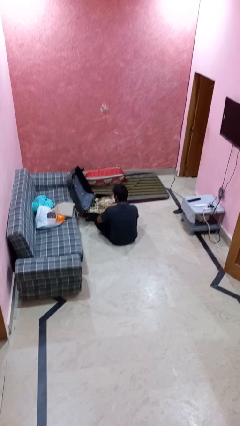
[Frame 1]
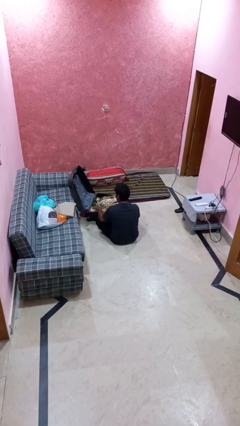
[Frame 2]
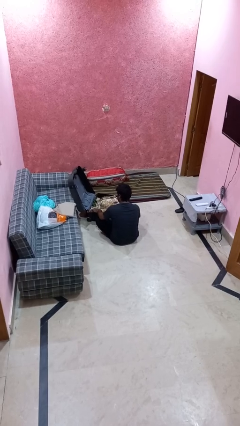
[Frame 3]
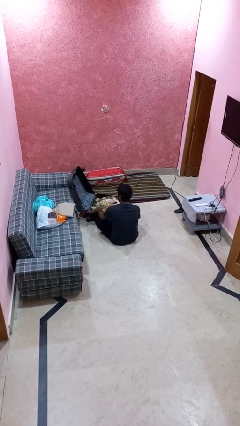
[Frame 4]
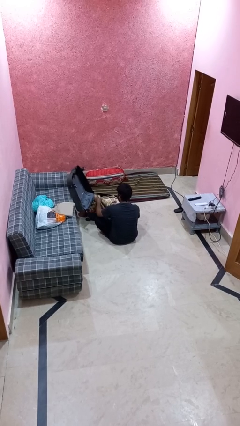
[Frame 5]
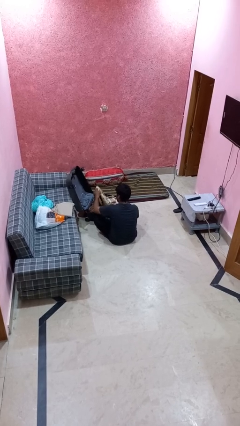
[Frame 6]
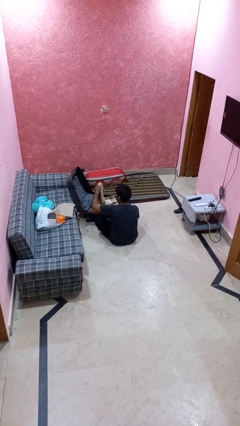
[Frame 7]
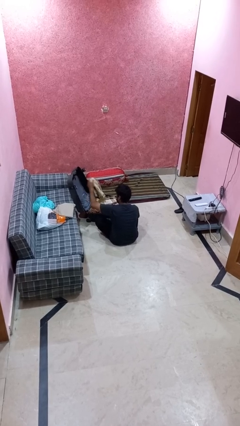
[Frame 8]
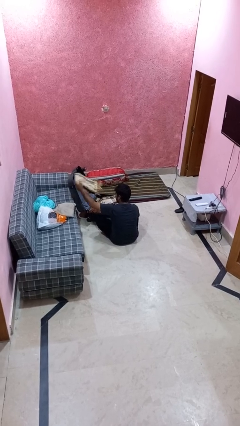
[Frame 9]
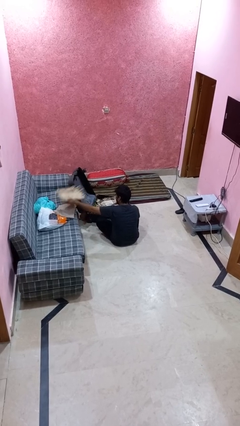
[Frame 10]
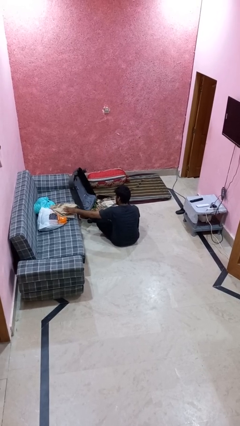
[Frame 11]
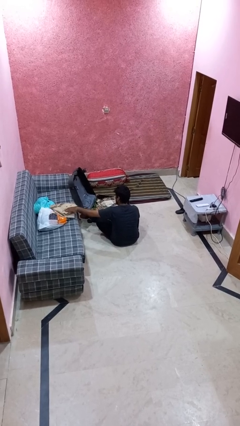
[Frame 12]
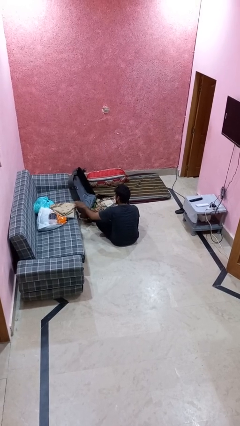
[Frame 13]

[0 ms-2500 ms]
person unloads clothes from suitcase

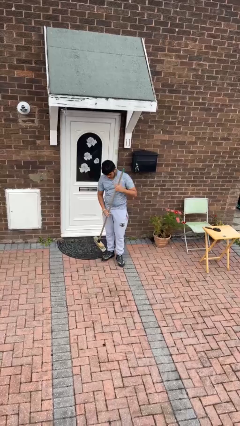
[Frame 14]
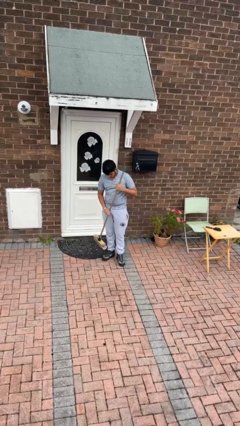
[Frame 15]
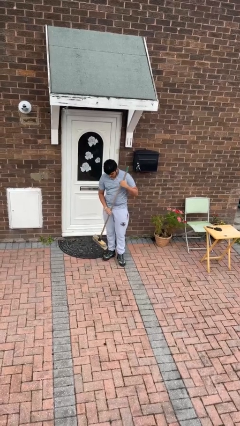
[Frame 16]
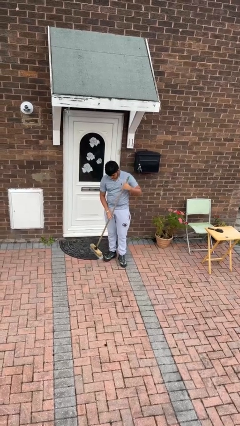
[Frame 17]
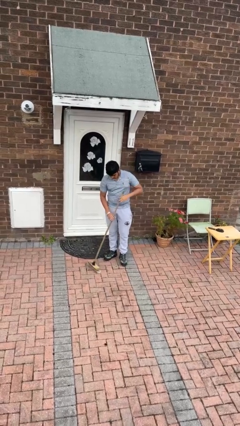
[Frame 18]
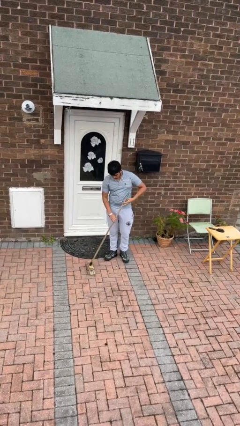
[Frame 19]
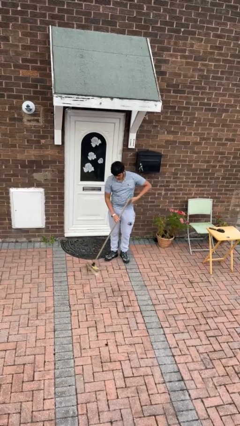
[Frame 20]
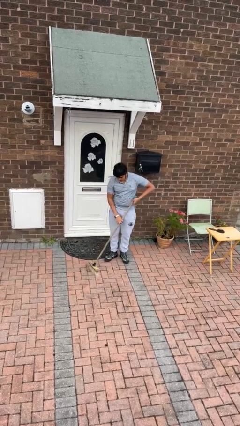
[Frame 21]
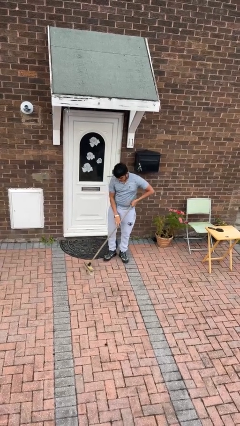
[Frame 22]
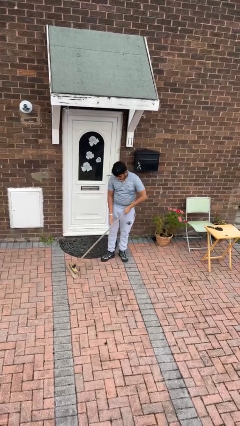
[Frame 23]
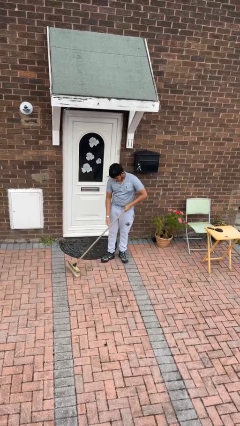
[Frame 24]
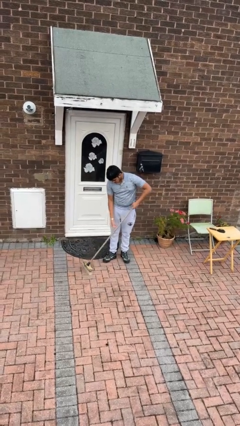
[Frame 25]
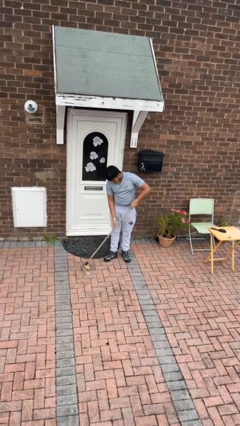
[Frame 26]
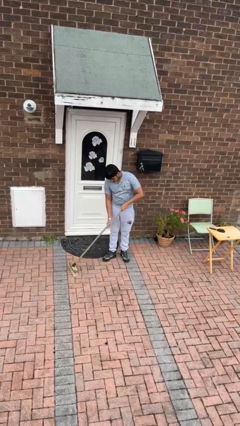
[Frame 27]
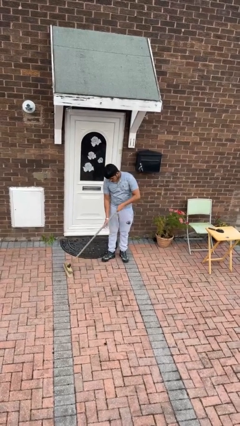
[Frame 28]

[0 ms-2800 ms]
person sweeps floor

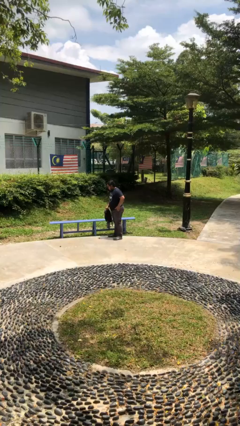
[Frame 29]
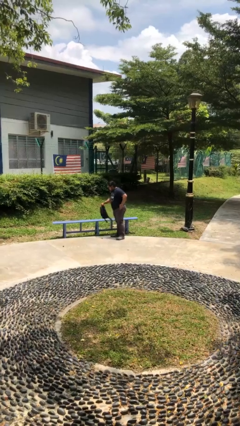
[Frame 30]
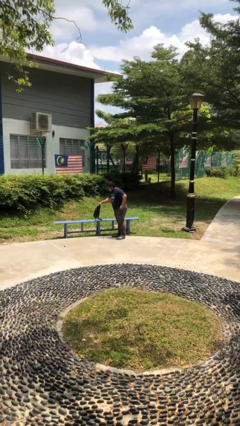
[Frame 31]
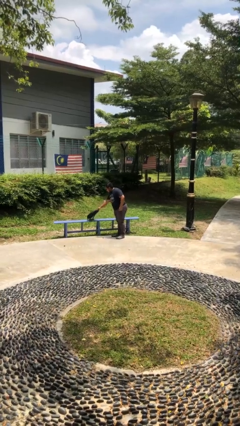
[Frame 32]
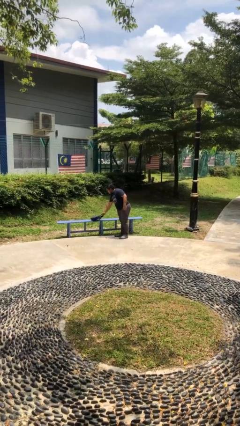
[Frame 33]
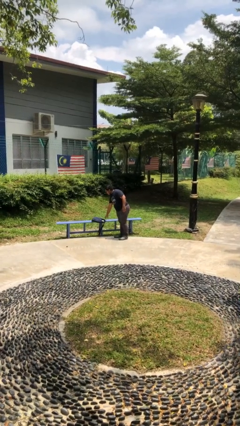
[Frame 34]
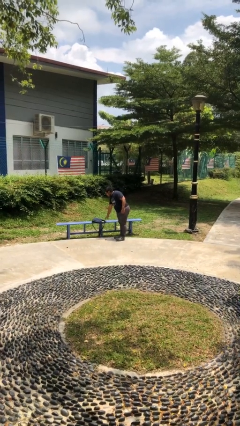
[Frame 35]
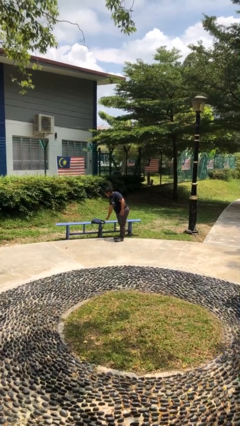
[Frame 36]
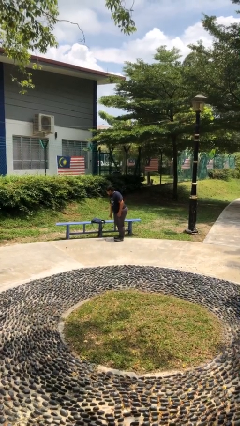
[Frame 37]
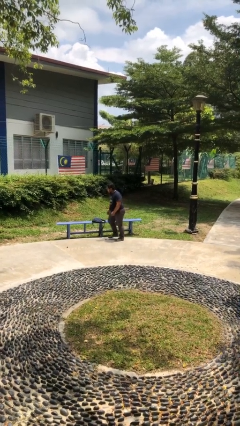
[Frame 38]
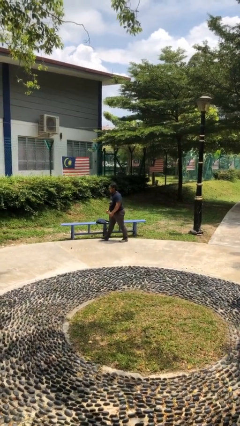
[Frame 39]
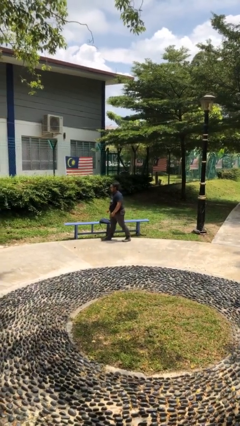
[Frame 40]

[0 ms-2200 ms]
person puts down object on table

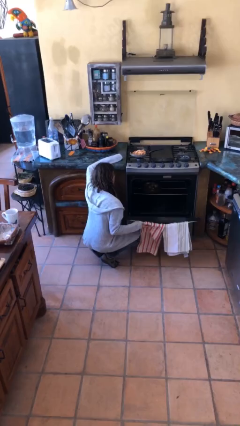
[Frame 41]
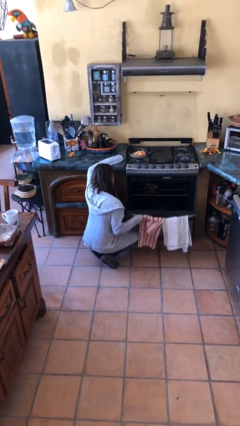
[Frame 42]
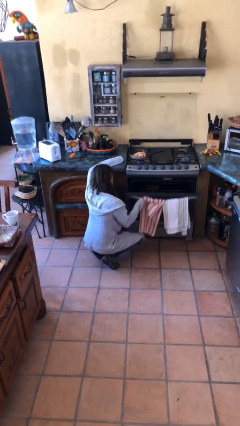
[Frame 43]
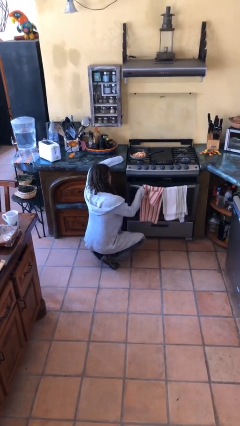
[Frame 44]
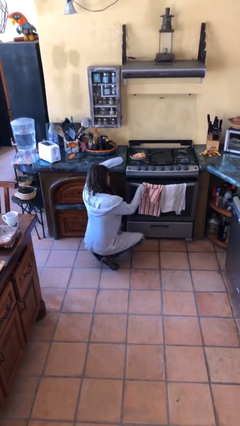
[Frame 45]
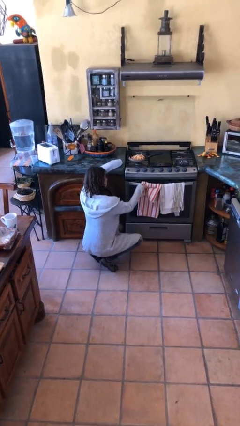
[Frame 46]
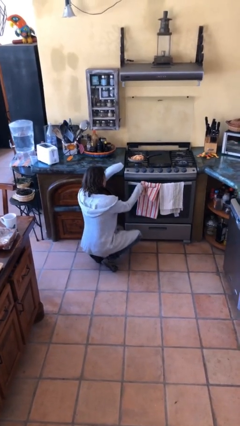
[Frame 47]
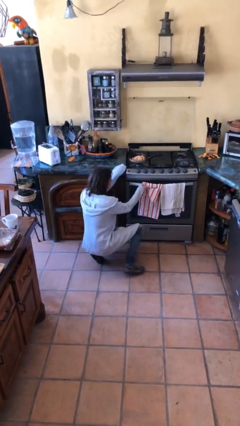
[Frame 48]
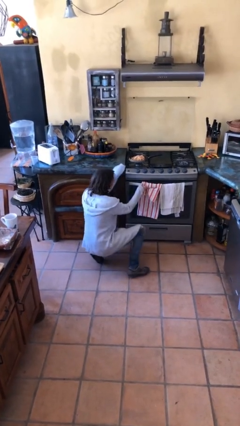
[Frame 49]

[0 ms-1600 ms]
person closes oven door

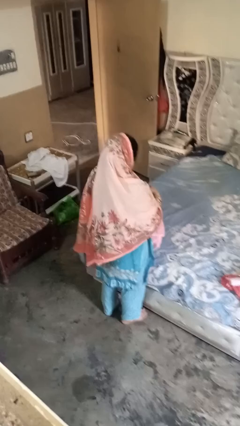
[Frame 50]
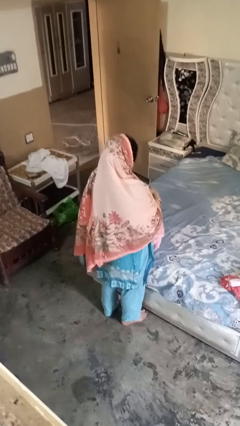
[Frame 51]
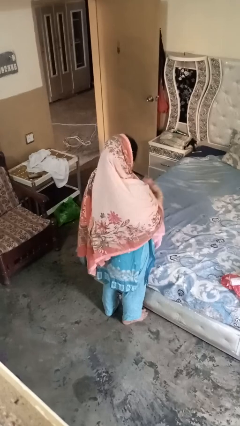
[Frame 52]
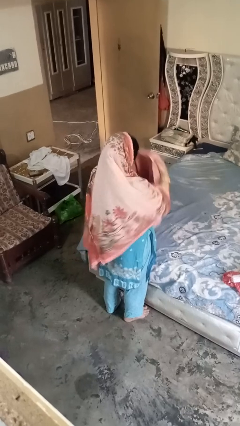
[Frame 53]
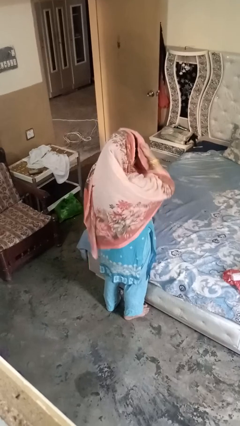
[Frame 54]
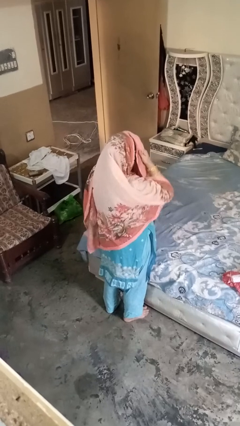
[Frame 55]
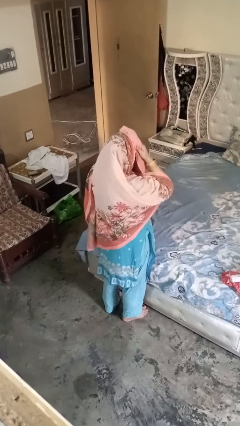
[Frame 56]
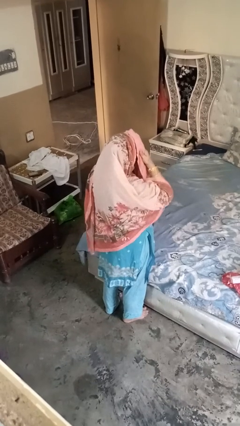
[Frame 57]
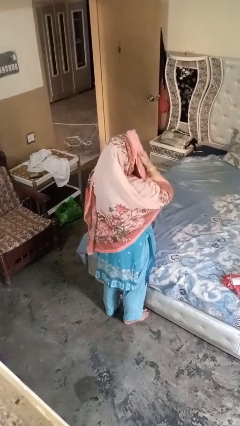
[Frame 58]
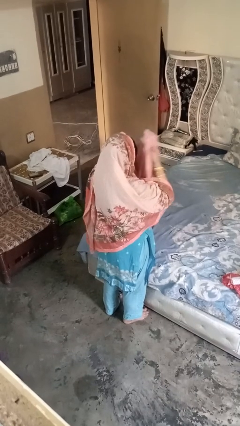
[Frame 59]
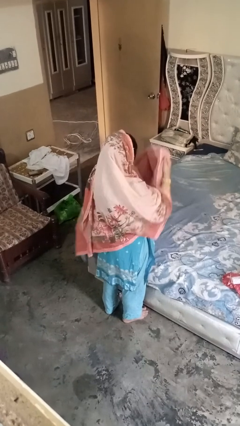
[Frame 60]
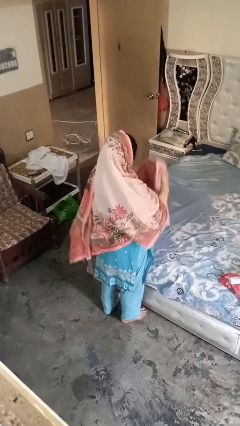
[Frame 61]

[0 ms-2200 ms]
person dries hair with towel

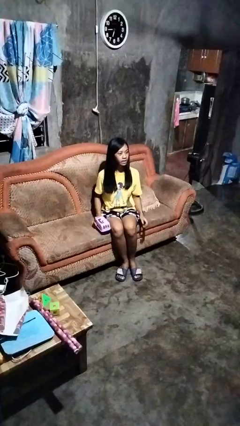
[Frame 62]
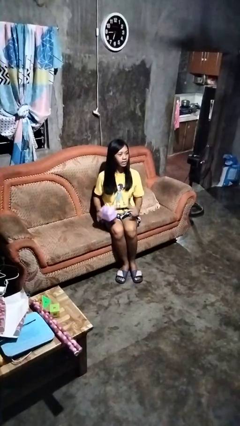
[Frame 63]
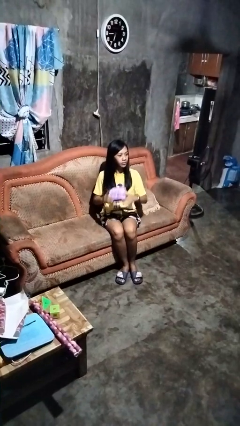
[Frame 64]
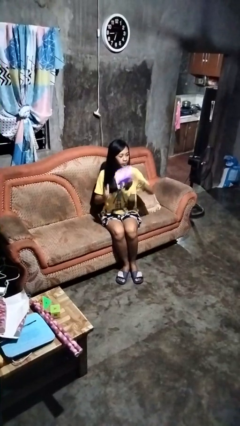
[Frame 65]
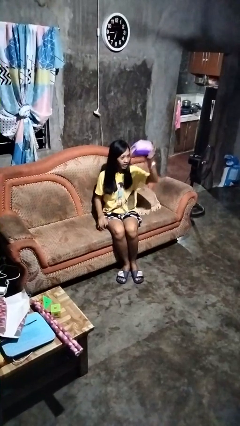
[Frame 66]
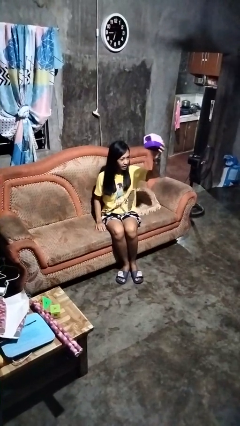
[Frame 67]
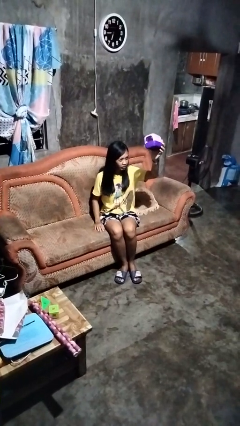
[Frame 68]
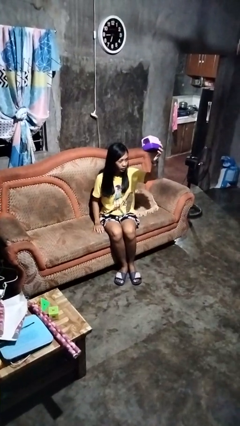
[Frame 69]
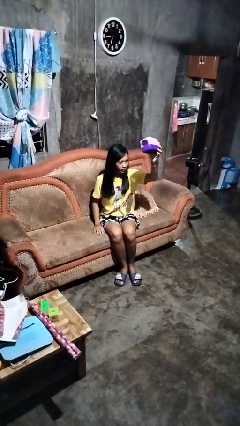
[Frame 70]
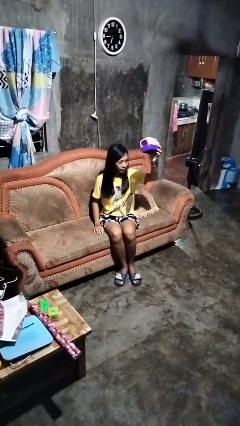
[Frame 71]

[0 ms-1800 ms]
person holds object above head

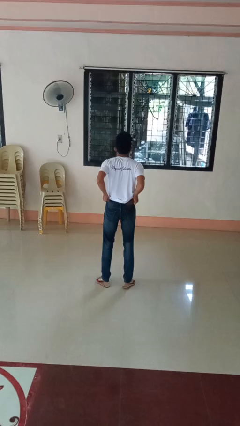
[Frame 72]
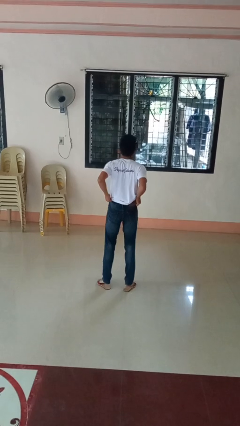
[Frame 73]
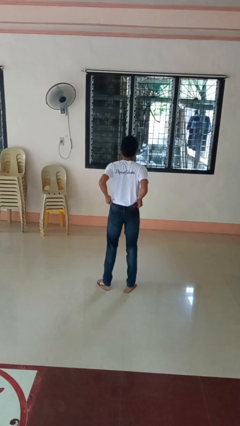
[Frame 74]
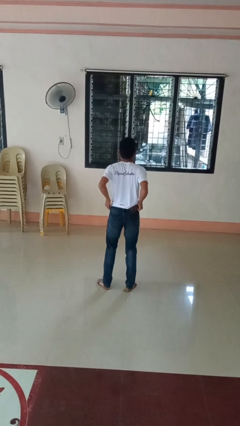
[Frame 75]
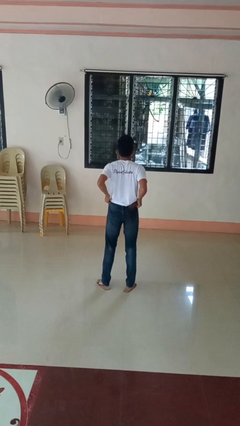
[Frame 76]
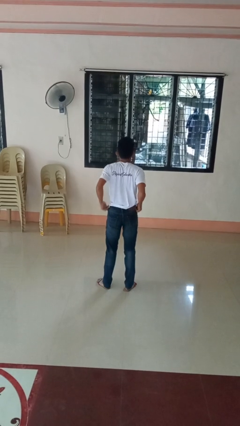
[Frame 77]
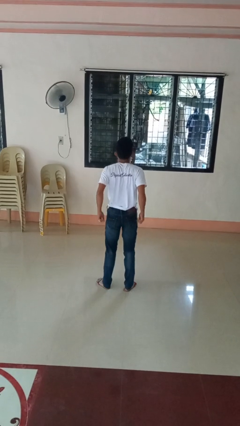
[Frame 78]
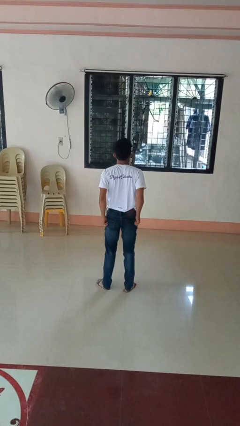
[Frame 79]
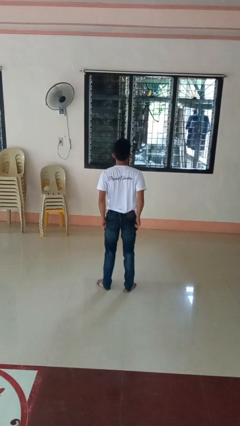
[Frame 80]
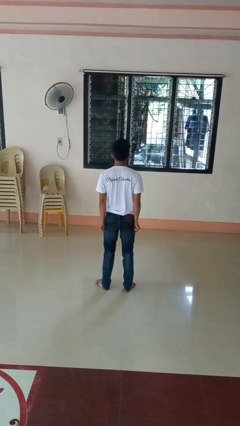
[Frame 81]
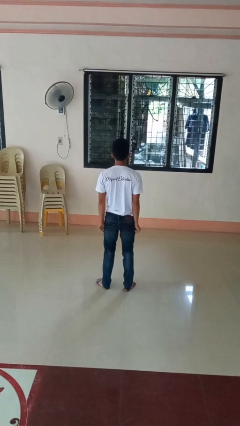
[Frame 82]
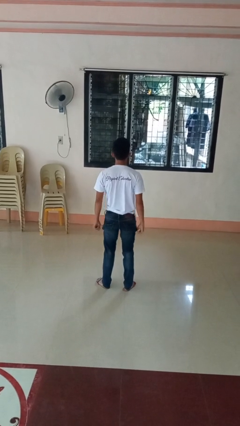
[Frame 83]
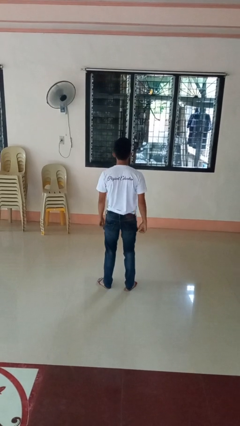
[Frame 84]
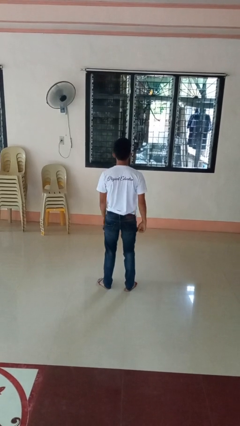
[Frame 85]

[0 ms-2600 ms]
person hikes up pants

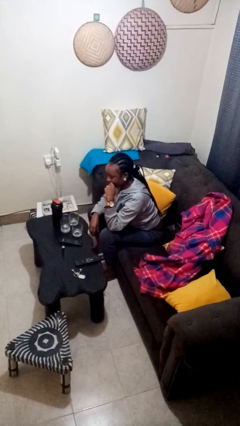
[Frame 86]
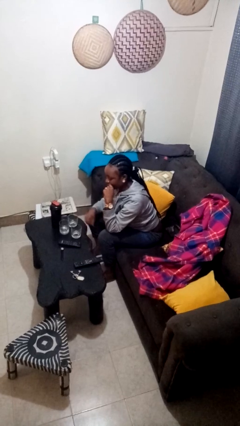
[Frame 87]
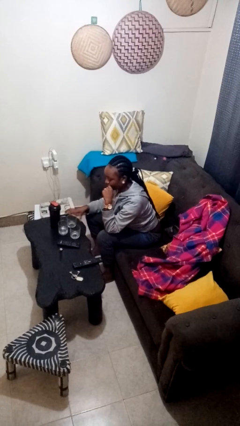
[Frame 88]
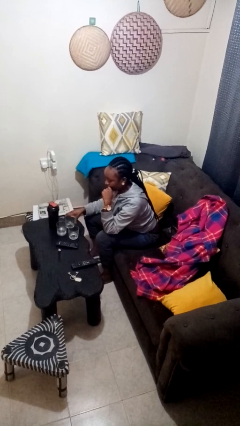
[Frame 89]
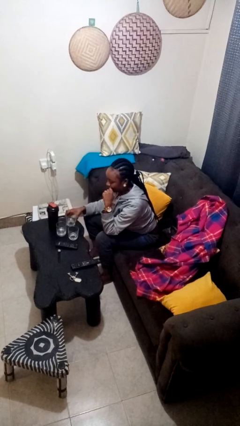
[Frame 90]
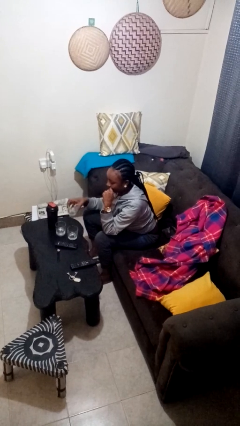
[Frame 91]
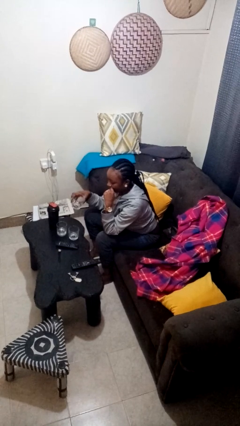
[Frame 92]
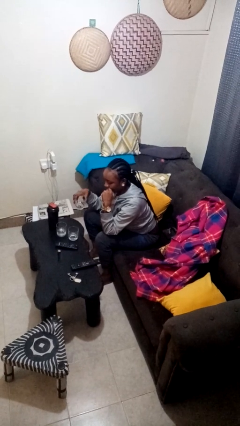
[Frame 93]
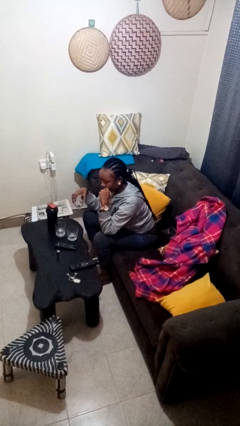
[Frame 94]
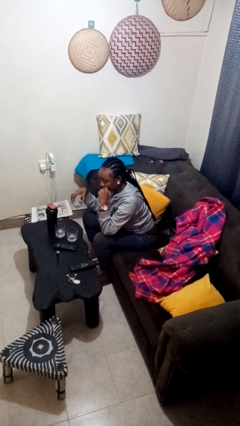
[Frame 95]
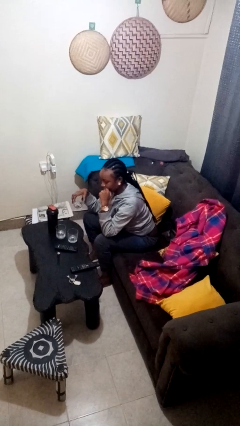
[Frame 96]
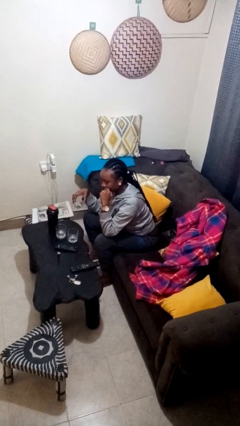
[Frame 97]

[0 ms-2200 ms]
person picks up object from table
